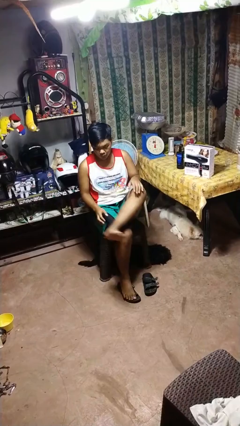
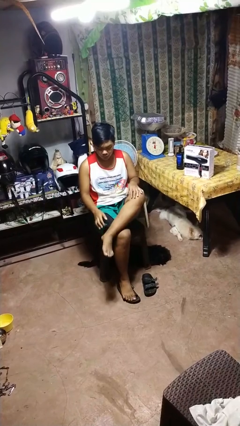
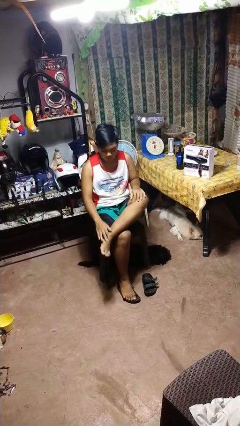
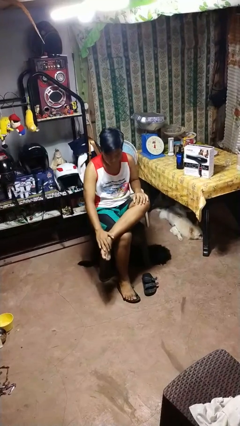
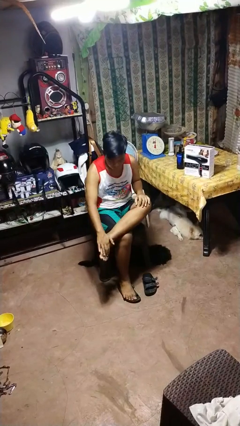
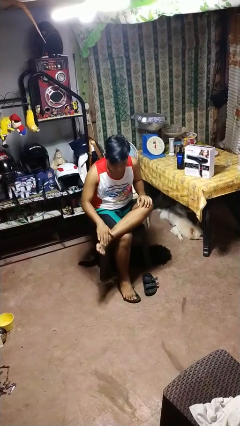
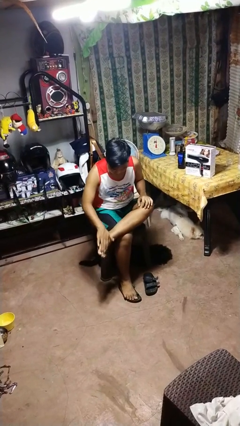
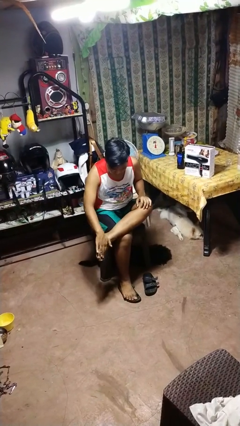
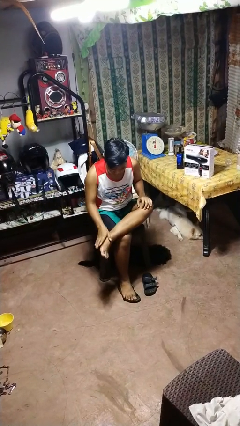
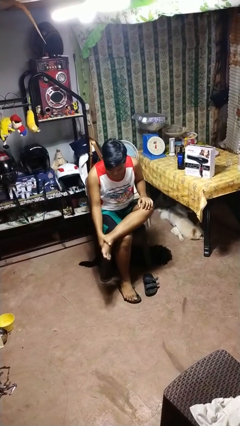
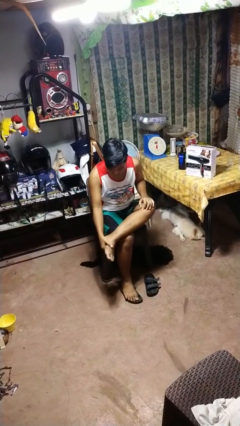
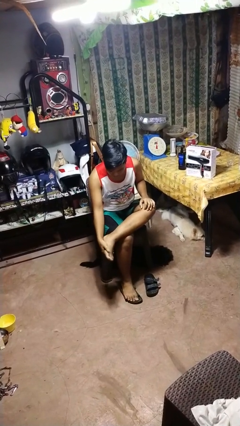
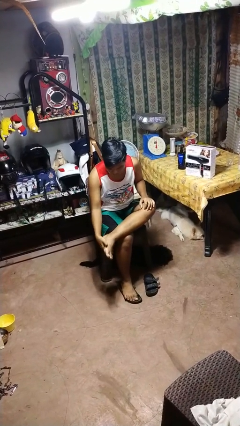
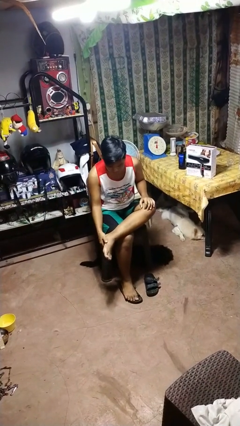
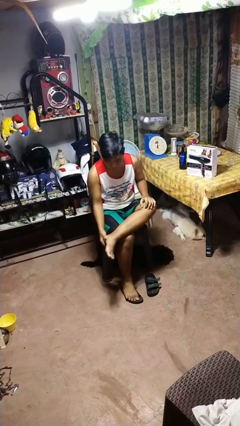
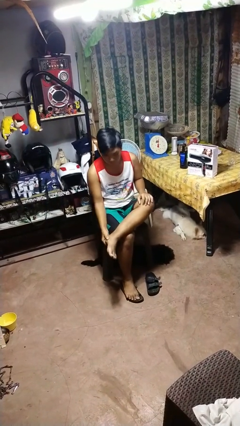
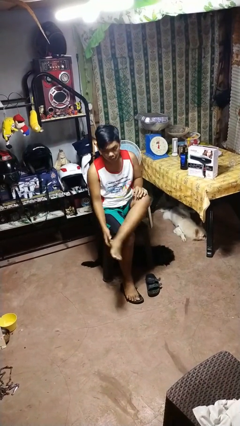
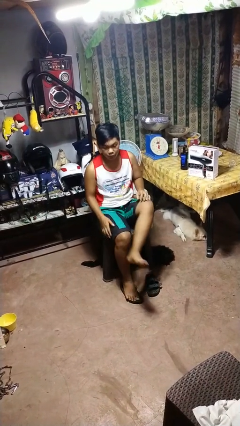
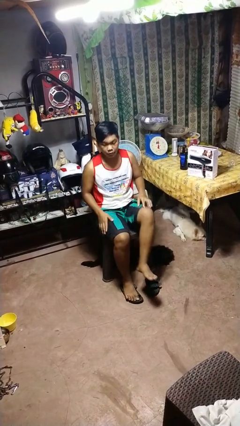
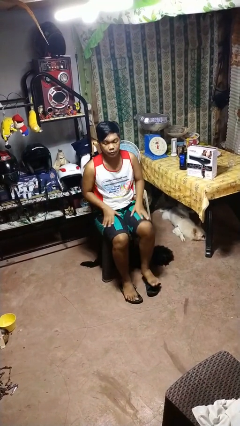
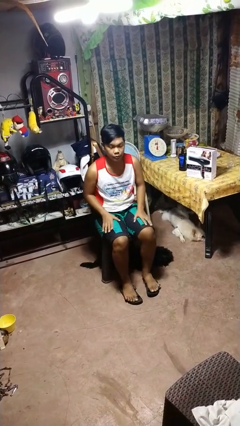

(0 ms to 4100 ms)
person rubs foot

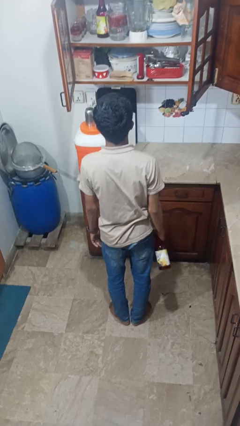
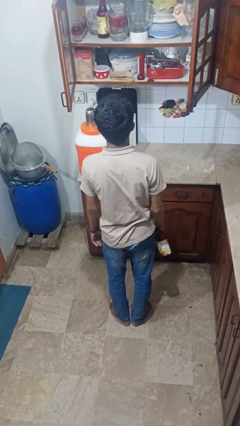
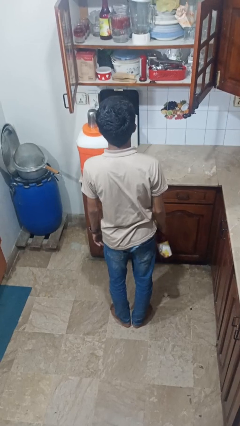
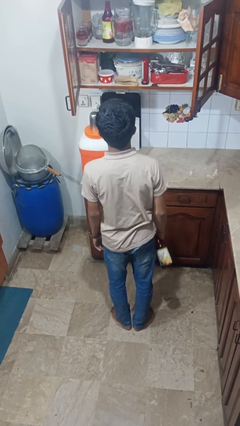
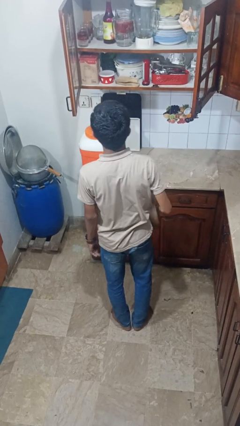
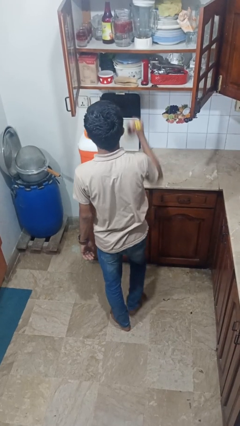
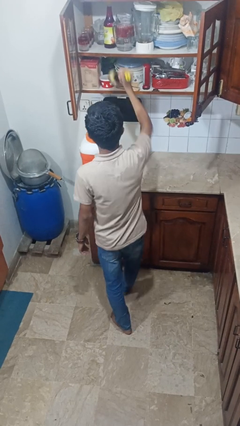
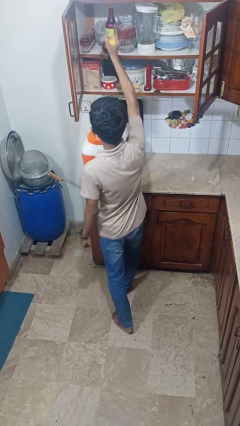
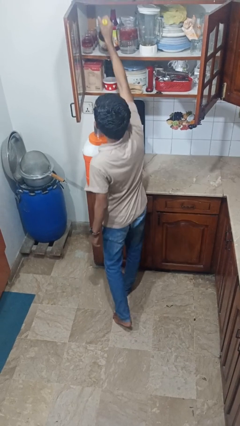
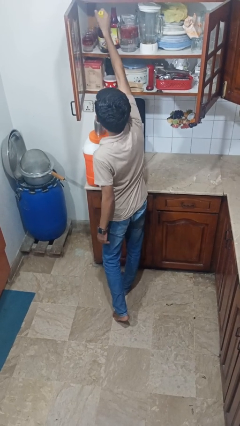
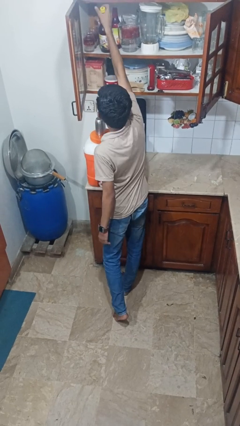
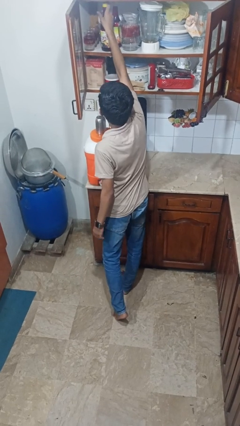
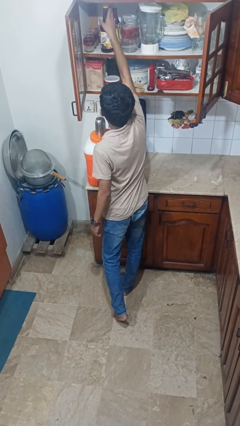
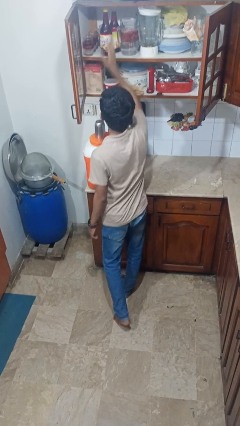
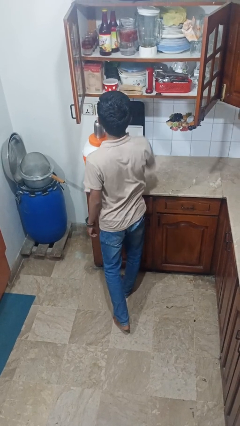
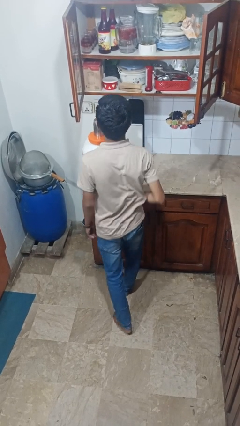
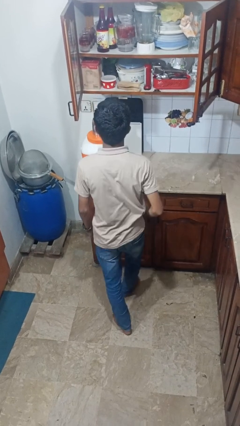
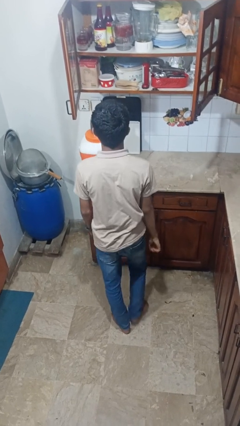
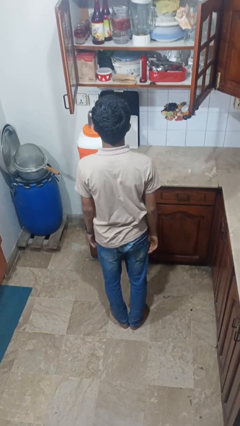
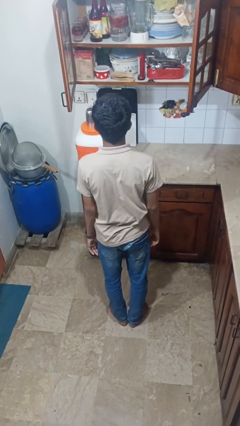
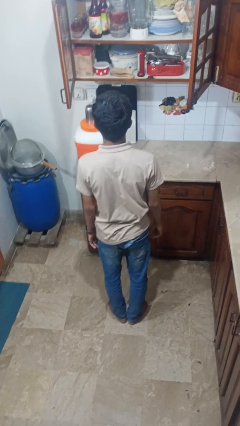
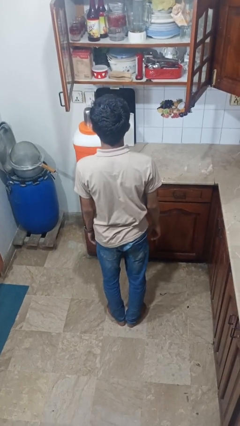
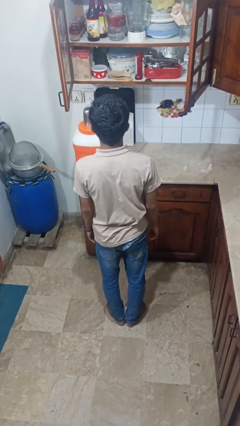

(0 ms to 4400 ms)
person puts down object into cabinet

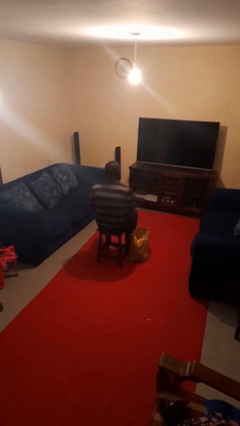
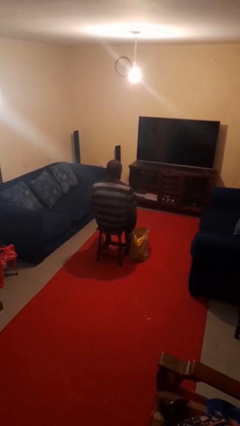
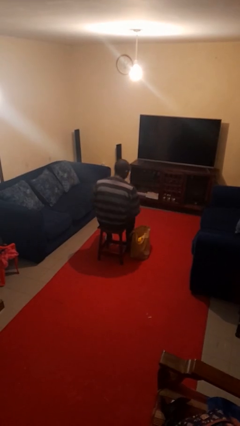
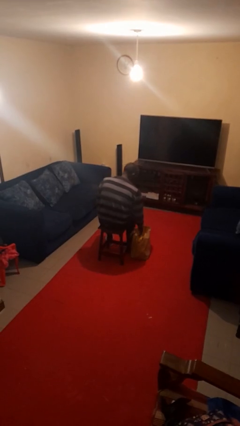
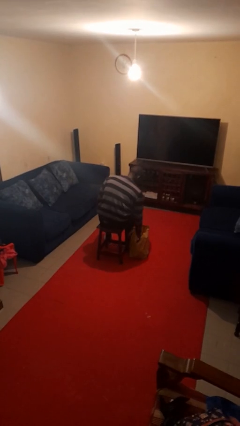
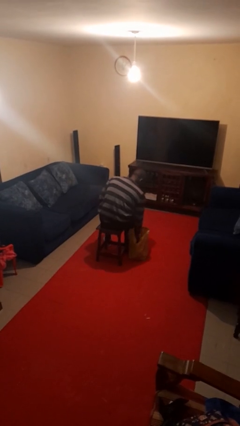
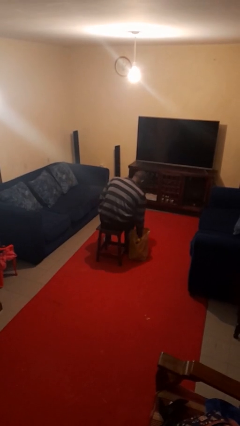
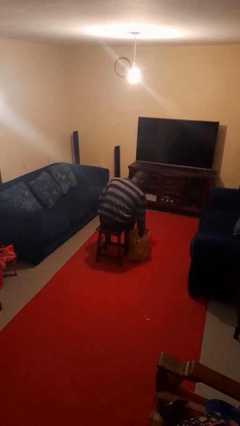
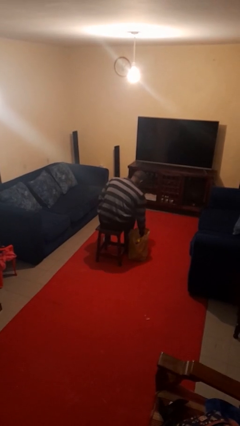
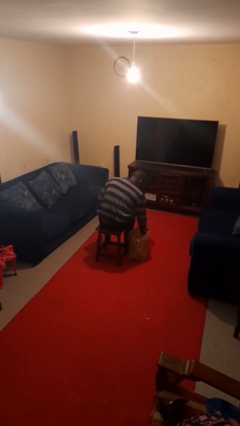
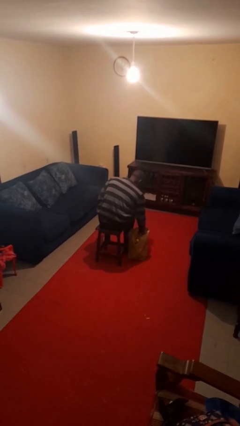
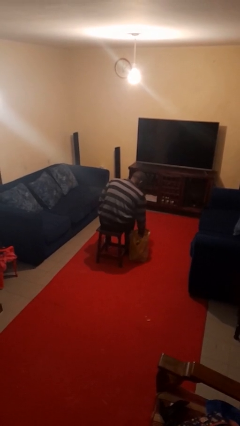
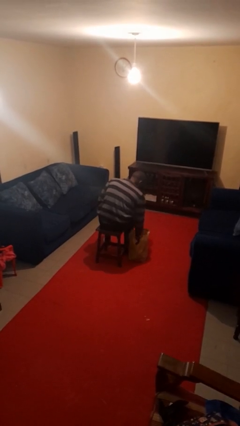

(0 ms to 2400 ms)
person searches in bag

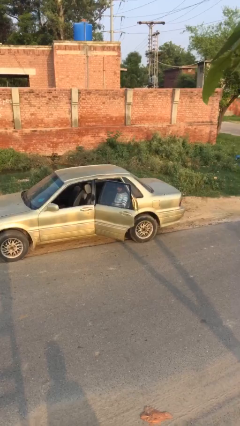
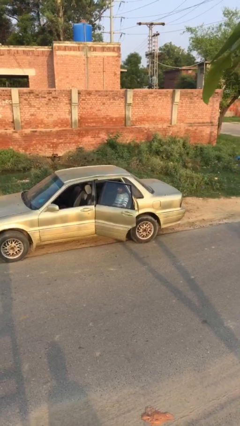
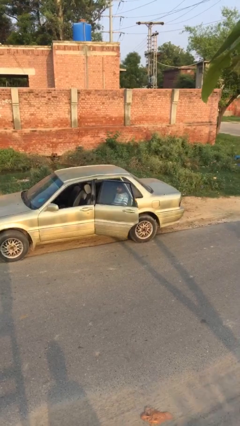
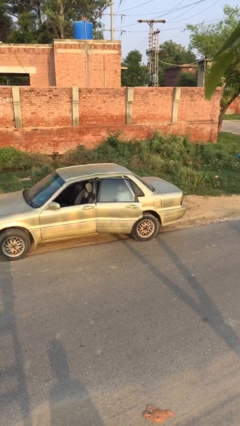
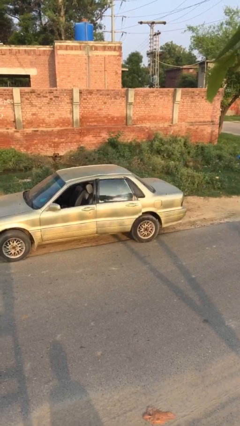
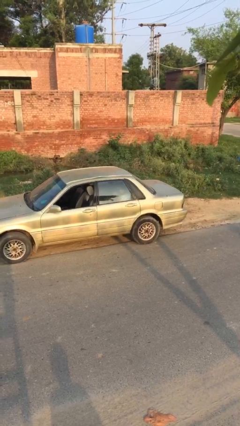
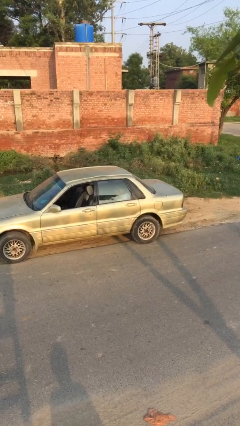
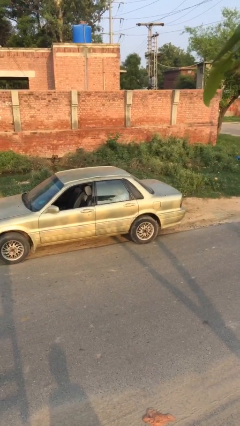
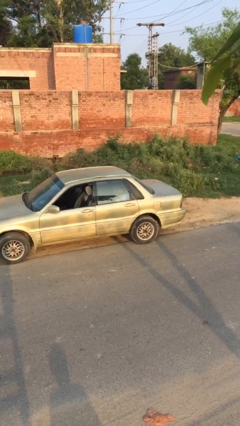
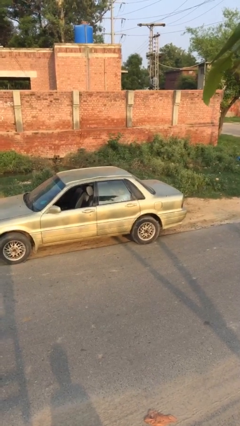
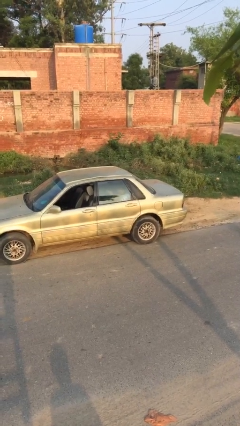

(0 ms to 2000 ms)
person closes car door

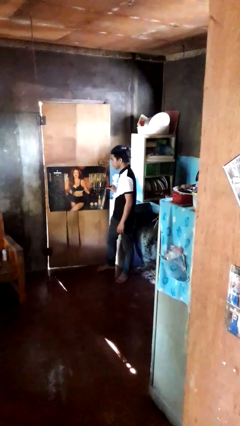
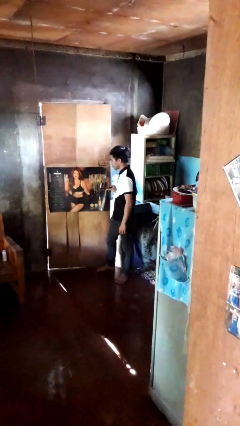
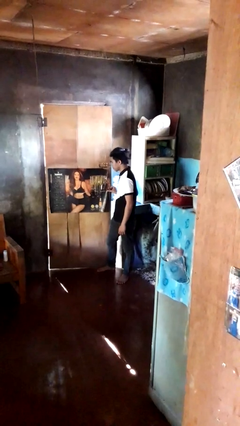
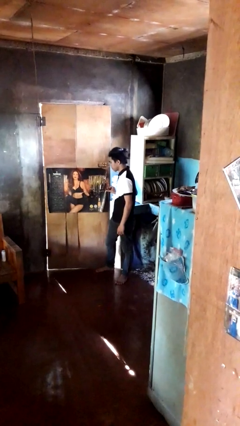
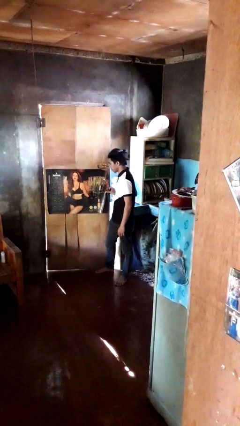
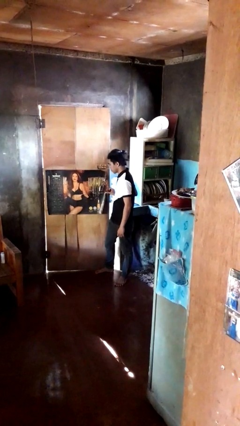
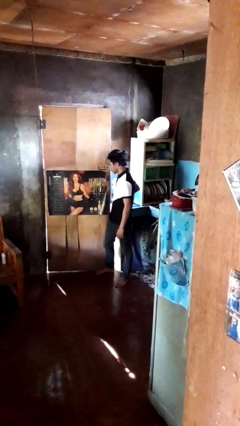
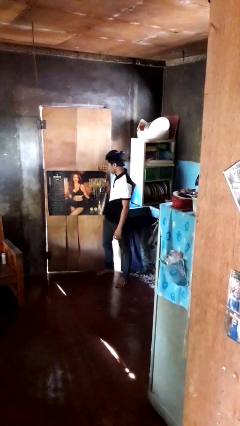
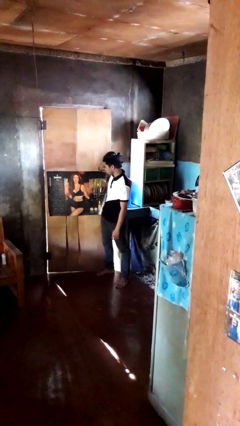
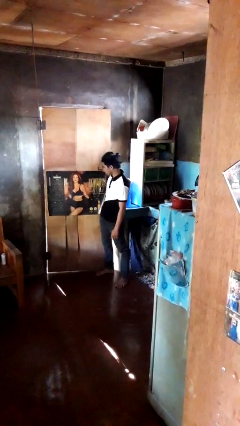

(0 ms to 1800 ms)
person opens facility door

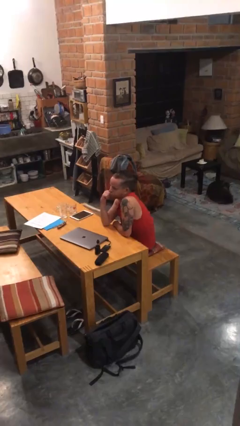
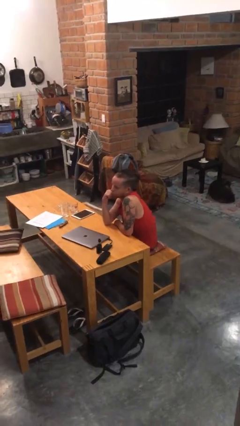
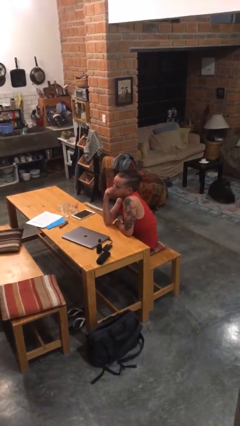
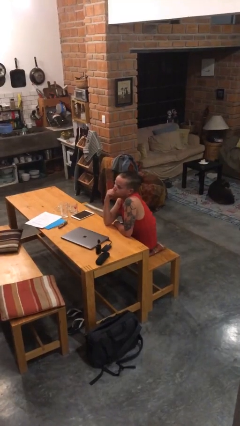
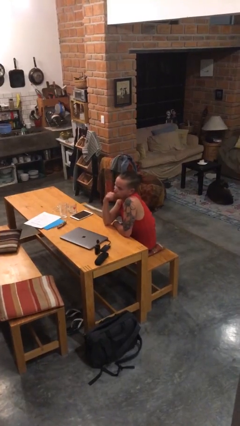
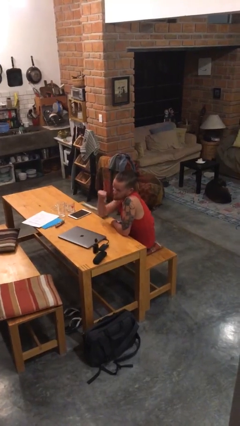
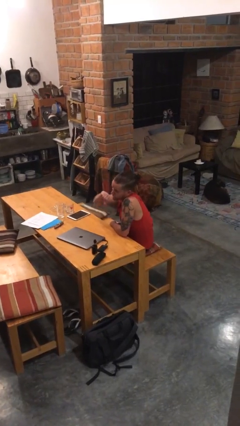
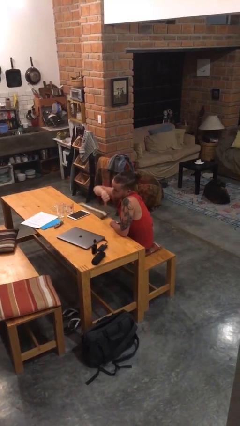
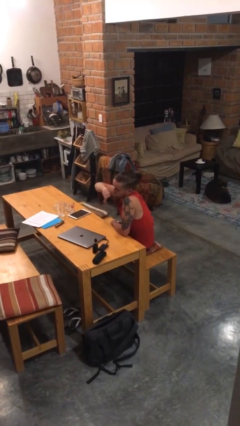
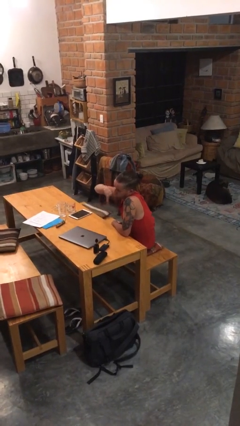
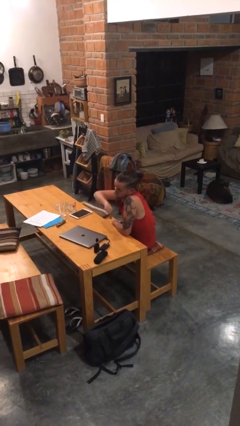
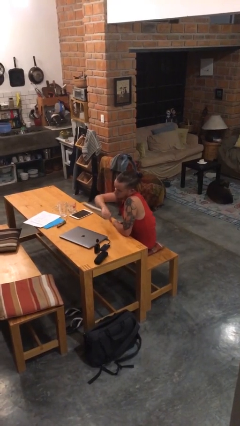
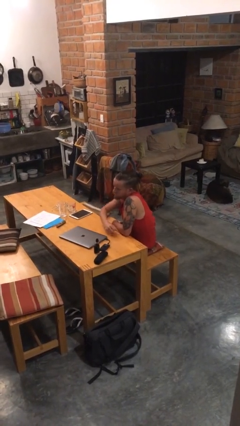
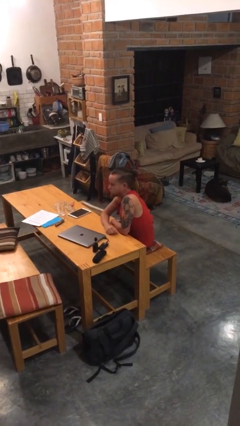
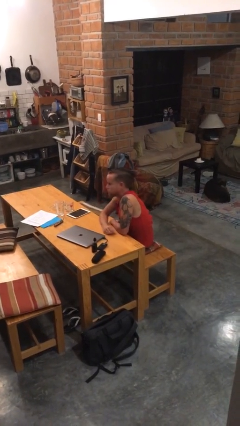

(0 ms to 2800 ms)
person gestures thumbs down

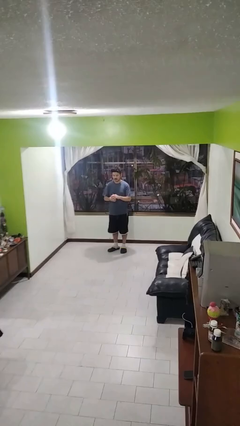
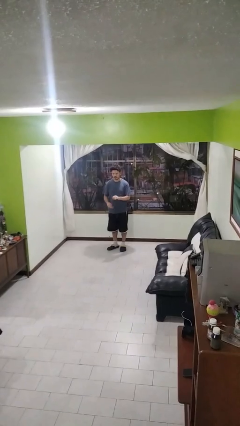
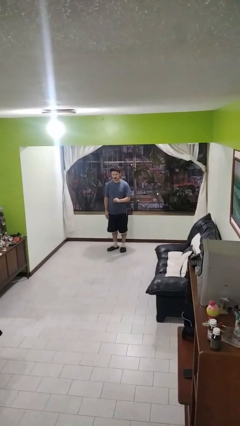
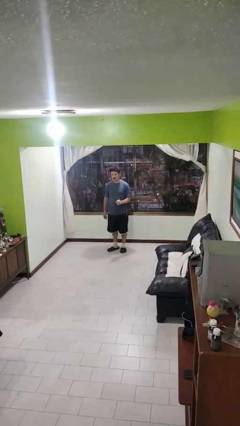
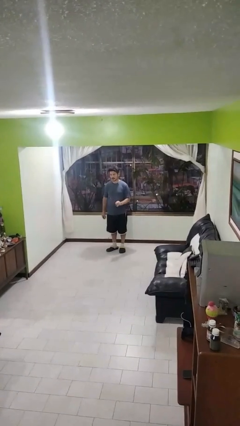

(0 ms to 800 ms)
person puts on ring
